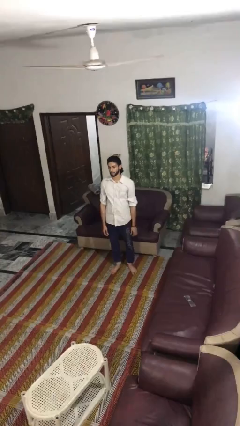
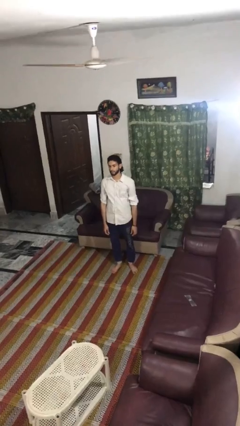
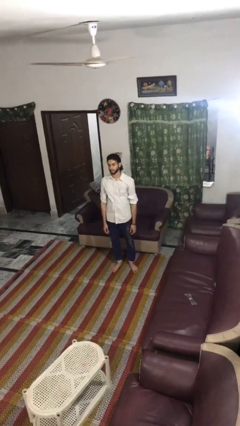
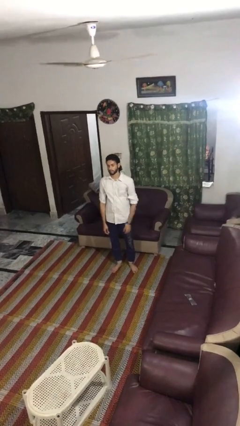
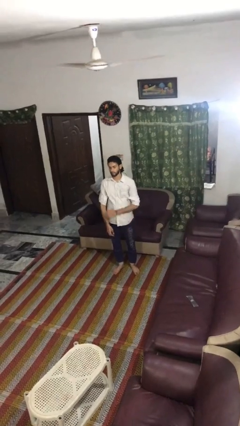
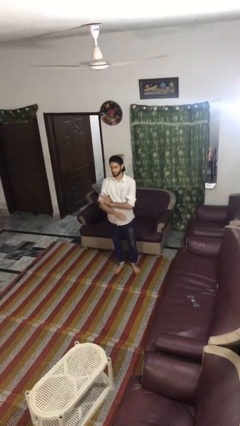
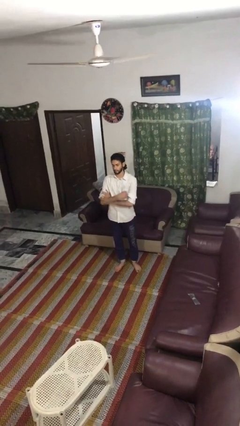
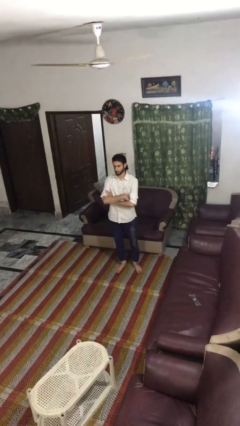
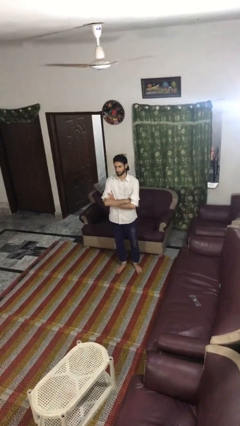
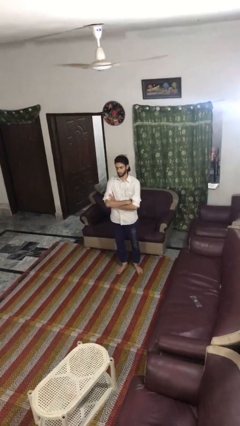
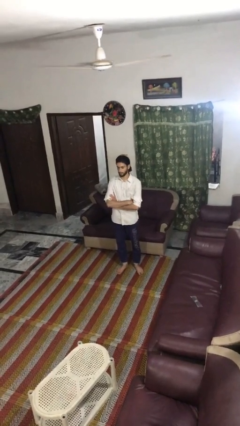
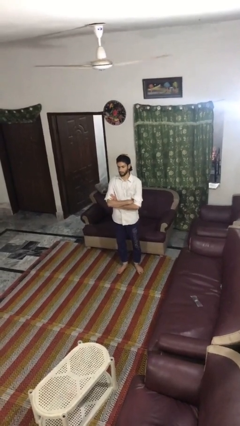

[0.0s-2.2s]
person crosses arms

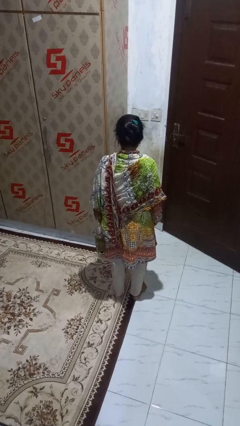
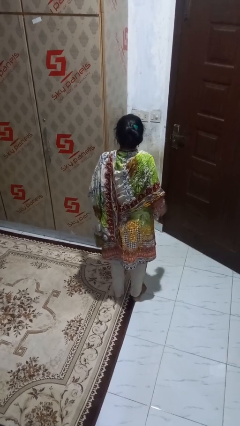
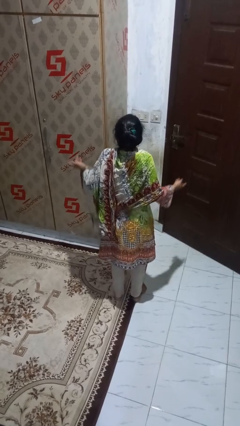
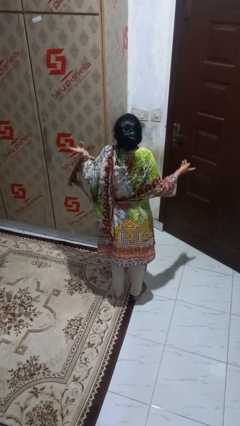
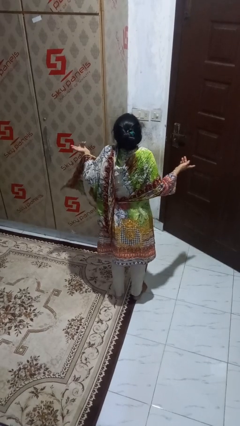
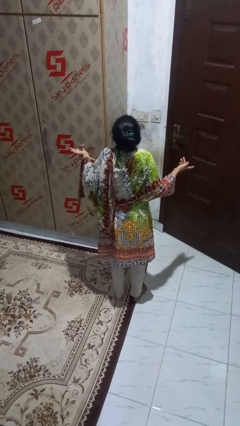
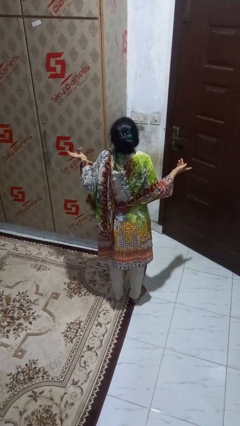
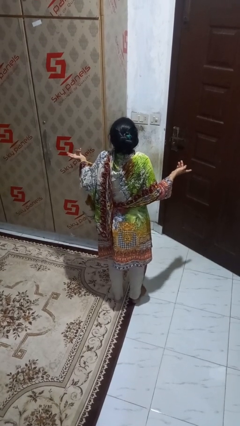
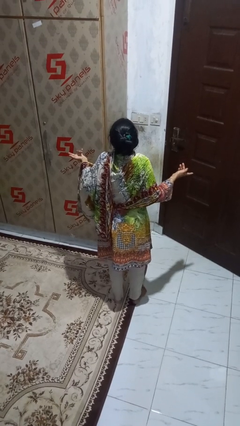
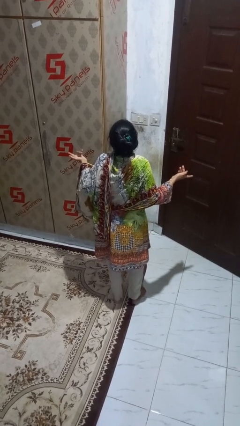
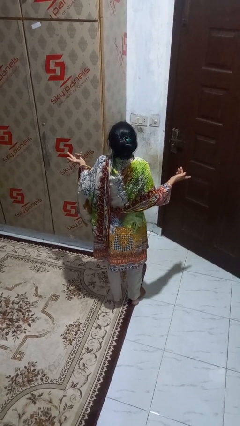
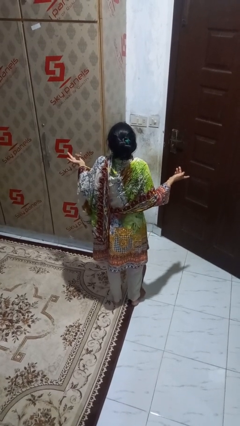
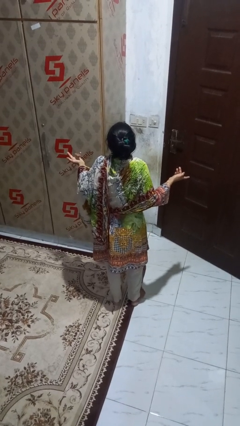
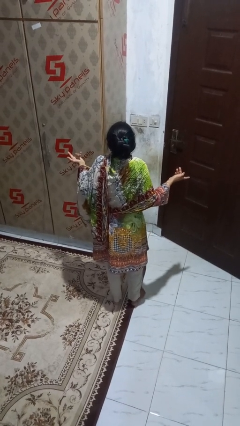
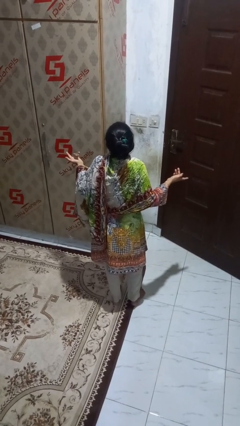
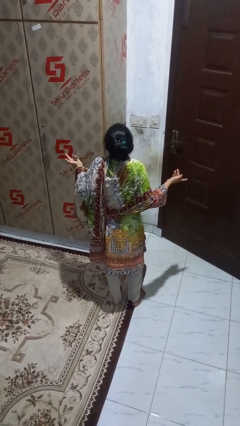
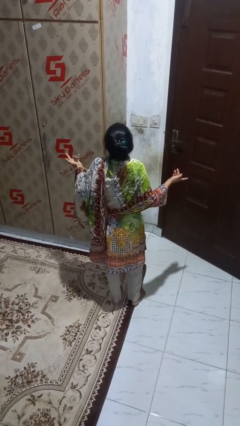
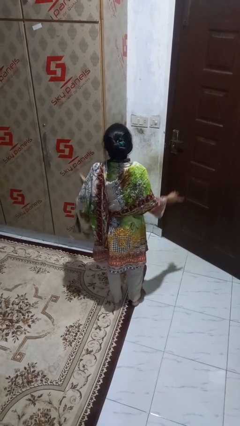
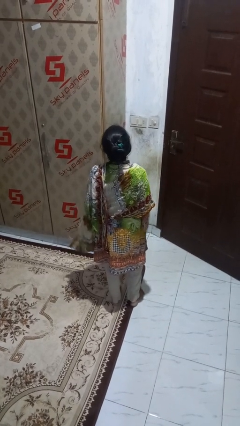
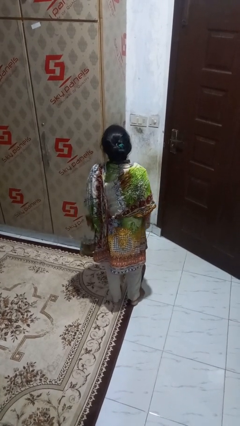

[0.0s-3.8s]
person shrugs

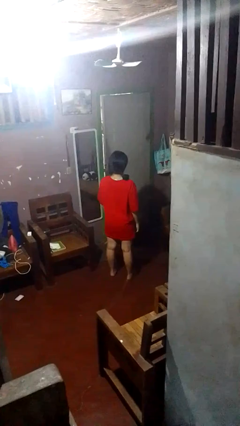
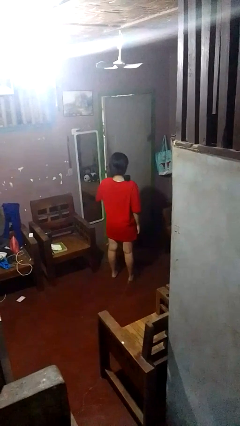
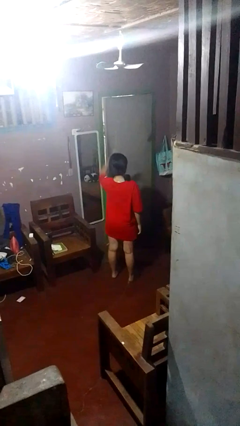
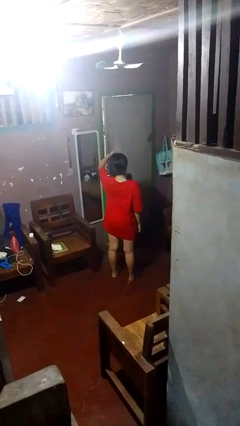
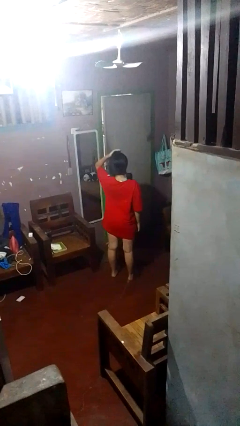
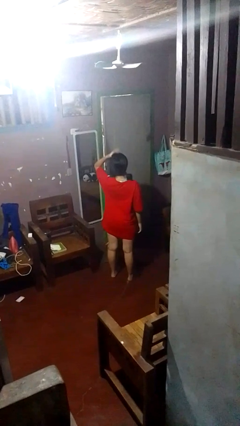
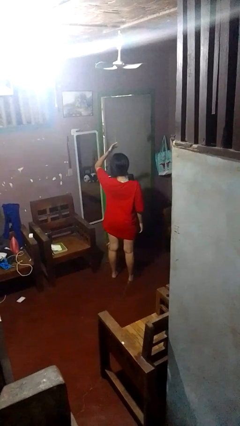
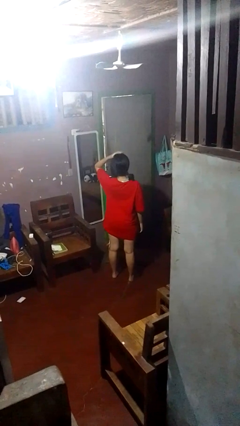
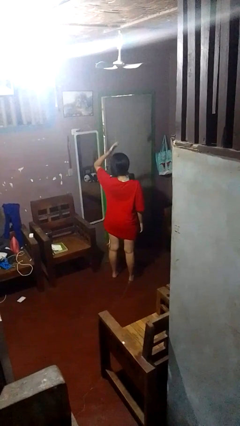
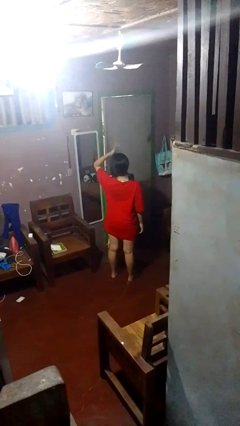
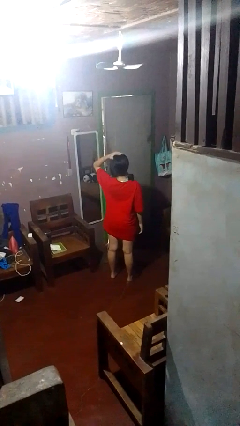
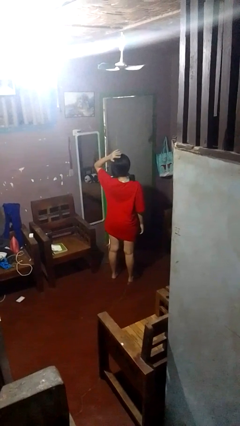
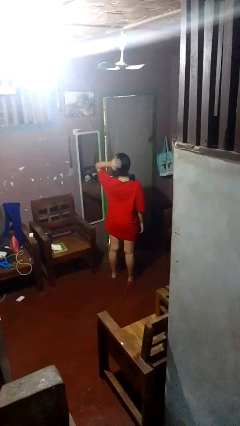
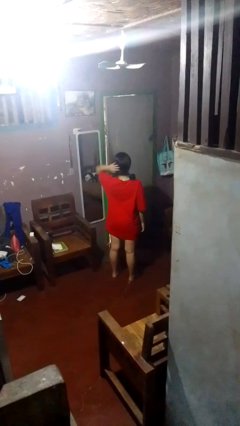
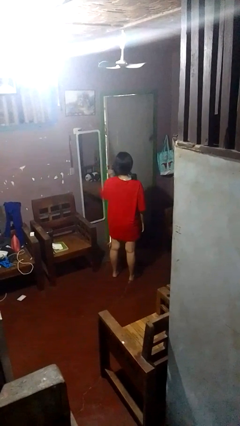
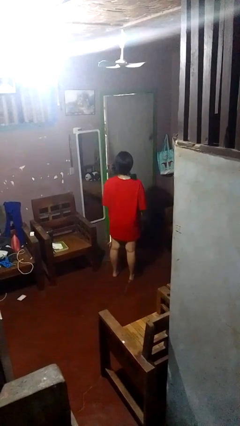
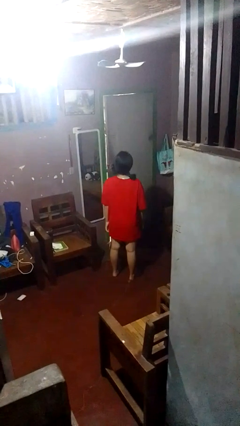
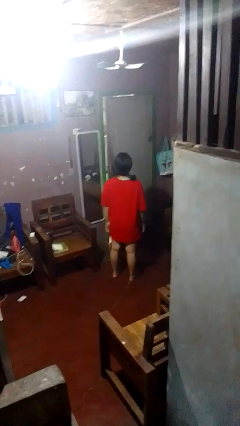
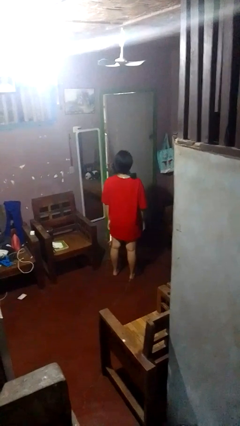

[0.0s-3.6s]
person pats head

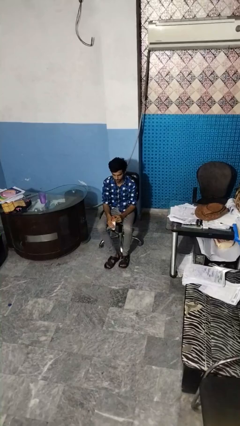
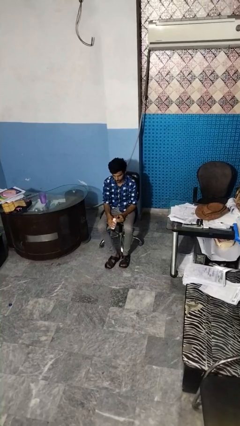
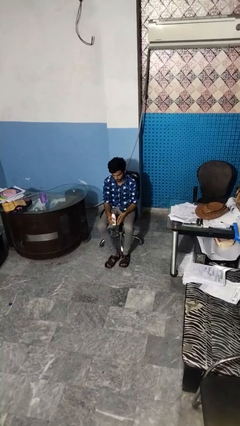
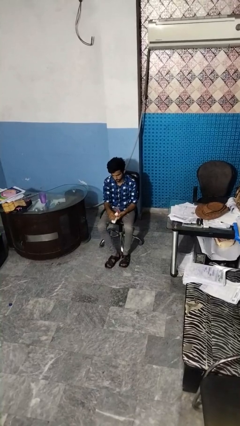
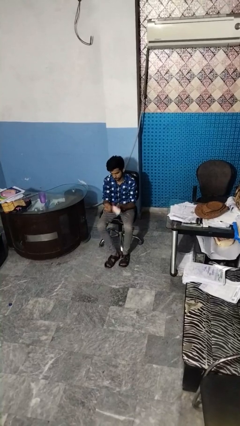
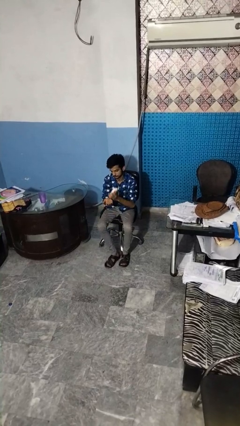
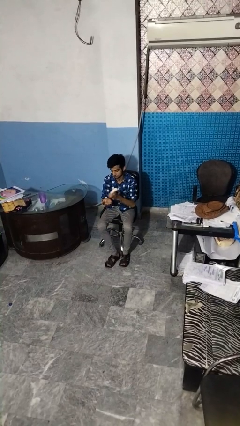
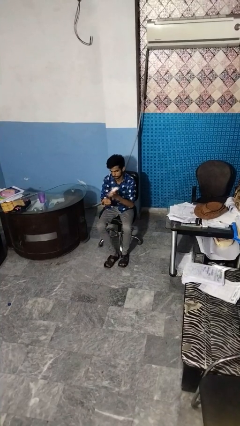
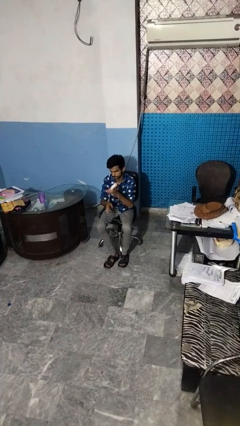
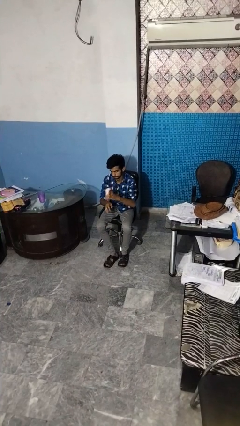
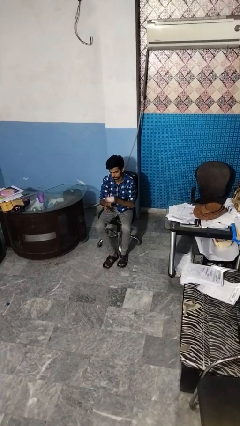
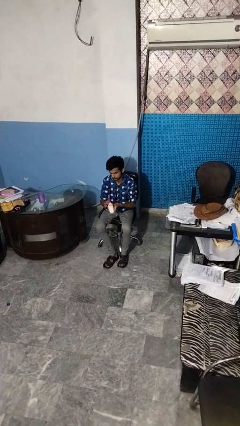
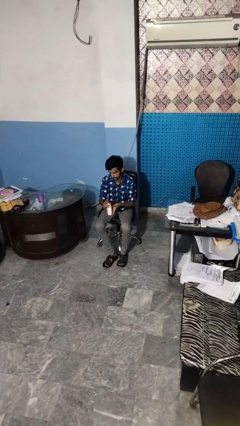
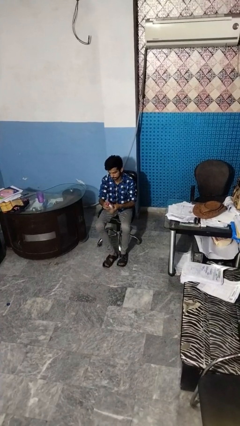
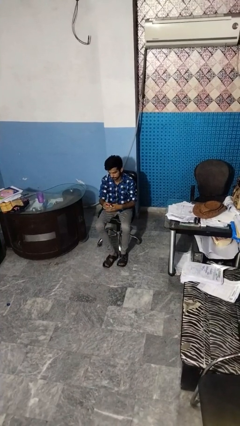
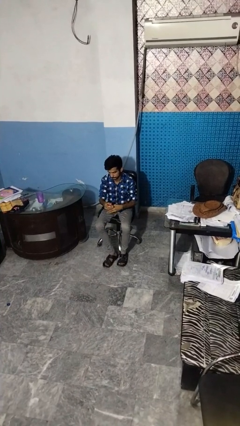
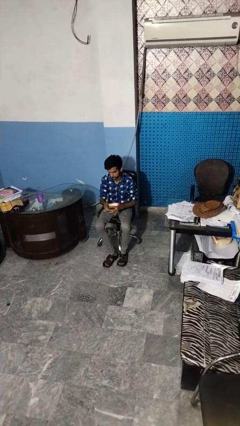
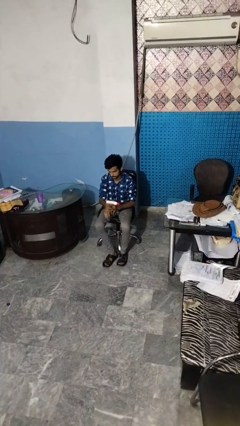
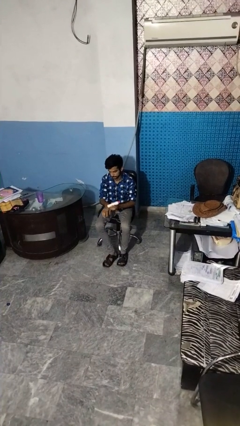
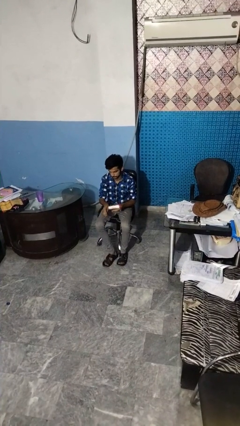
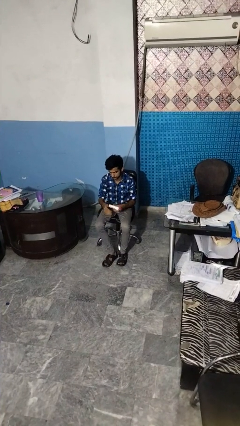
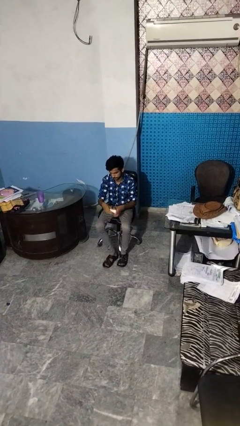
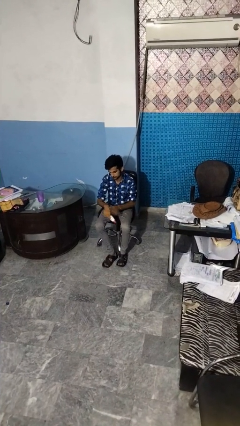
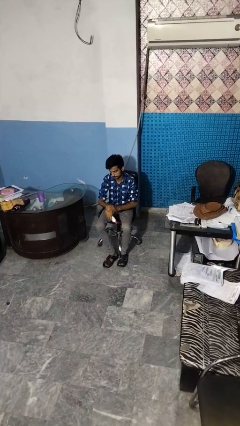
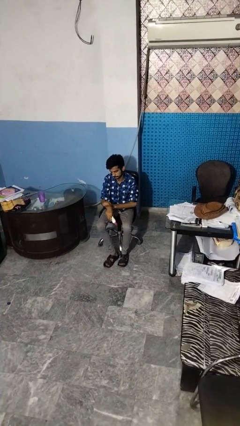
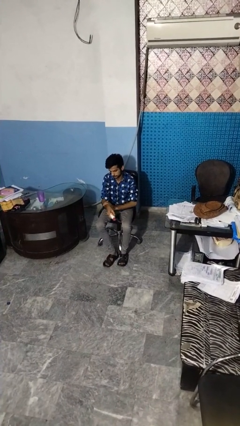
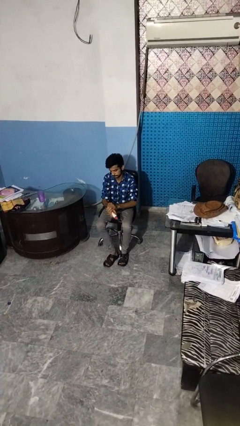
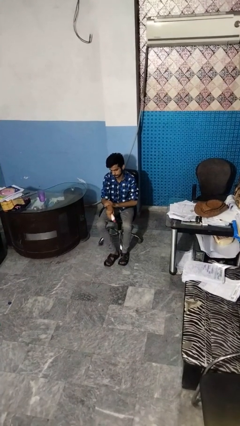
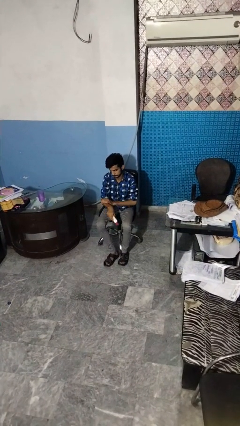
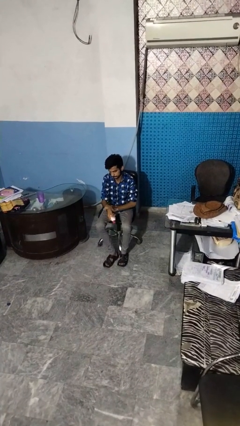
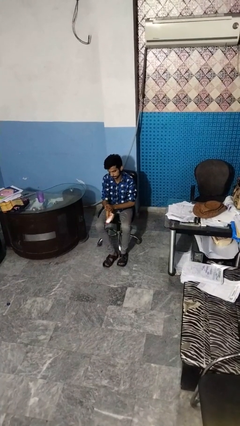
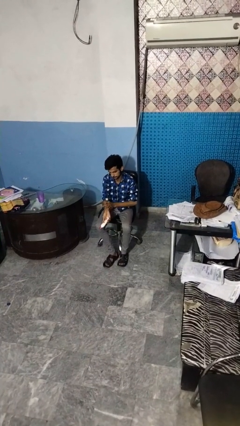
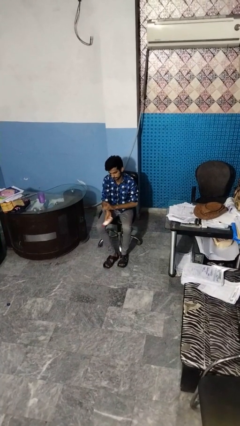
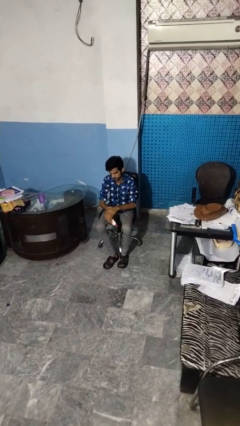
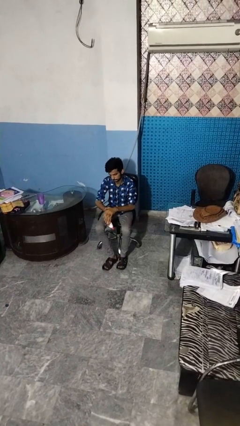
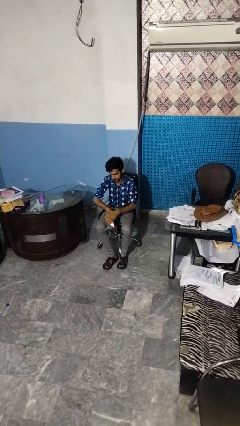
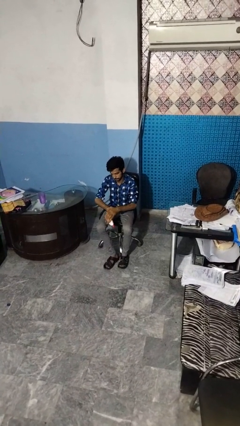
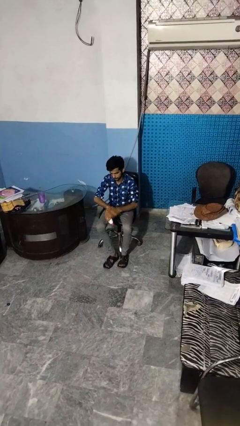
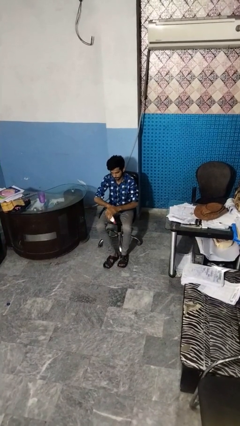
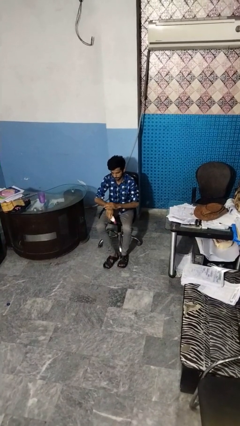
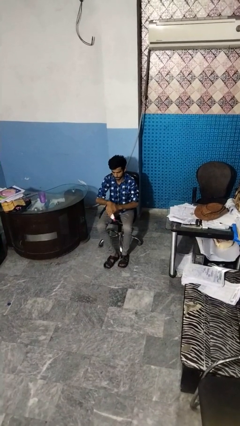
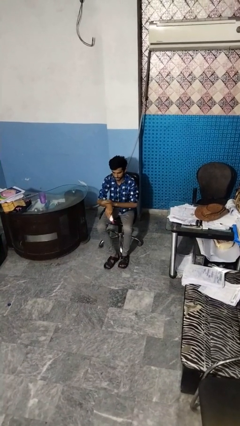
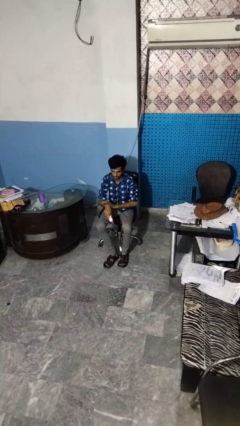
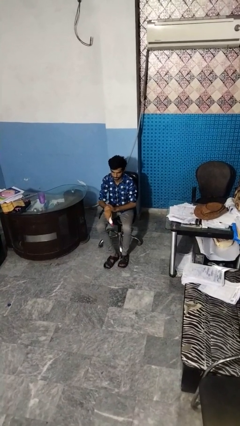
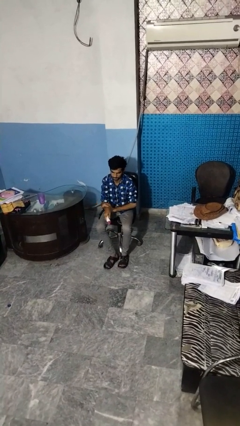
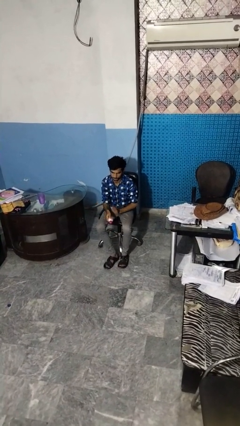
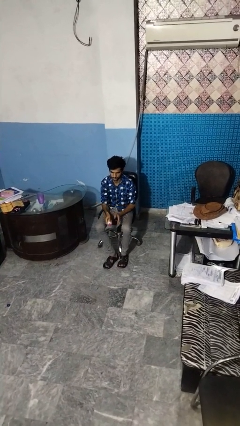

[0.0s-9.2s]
person applies sunscreen
